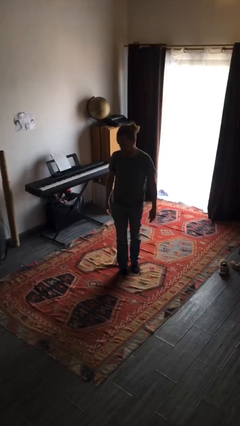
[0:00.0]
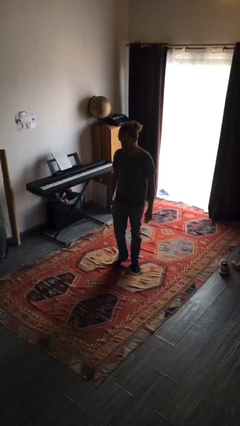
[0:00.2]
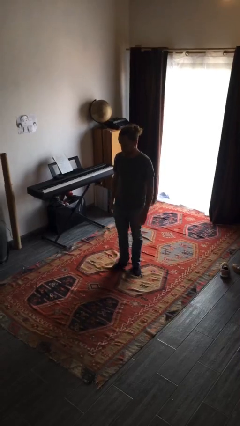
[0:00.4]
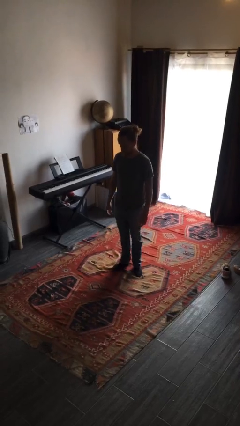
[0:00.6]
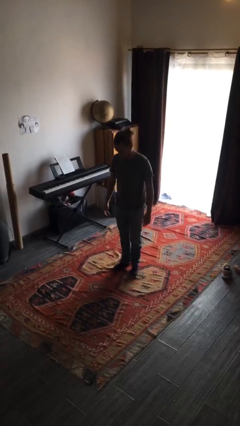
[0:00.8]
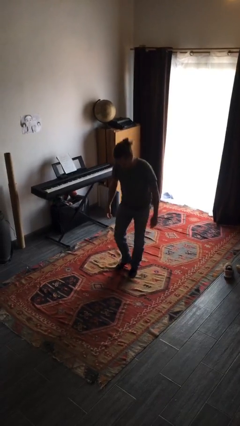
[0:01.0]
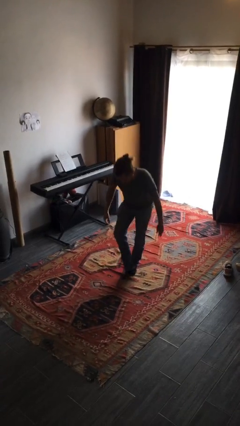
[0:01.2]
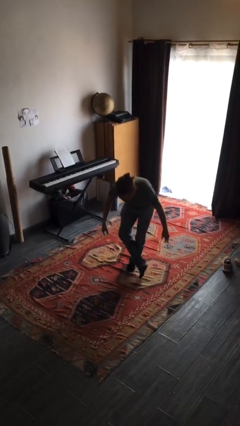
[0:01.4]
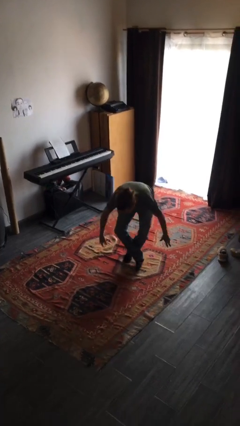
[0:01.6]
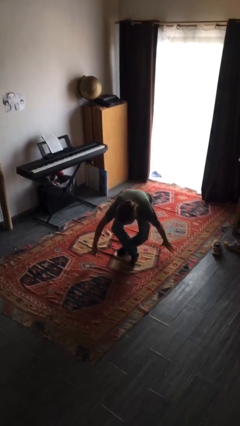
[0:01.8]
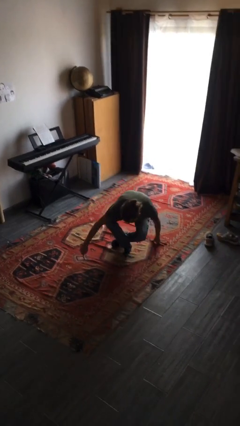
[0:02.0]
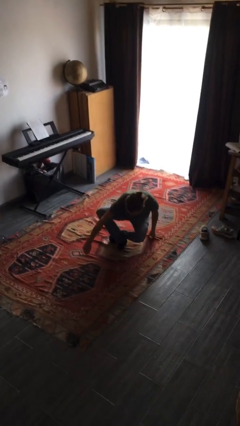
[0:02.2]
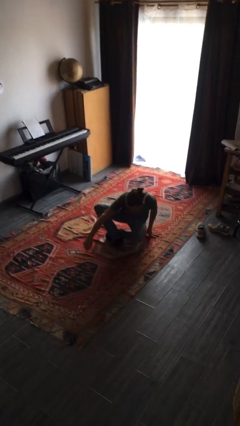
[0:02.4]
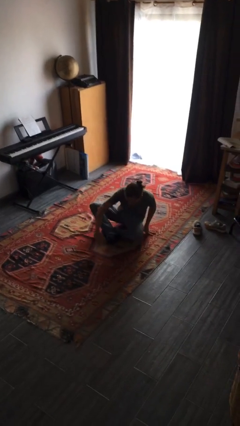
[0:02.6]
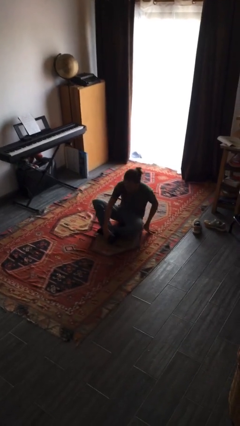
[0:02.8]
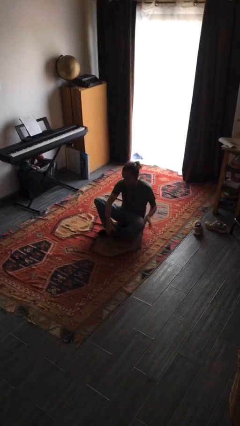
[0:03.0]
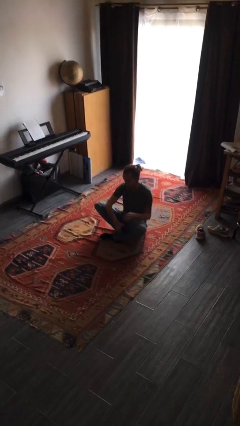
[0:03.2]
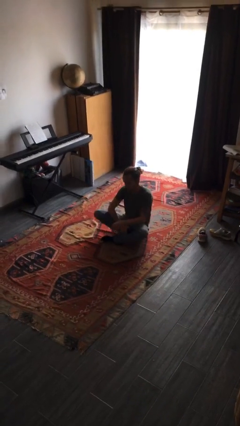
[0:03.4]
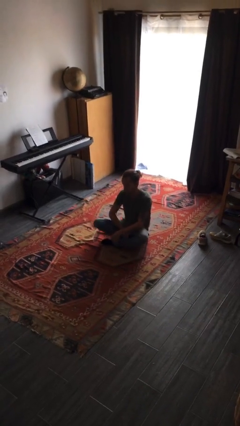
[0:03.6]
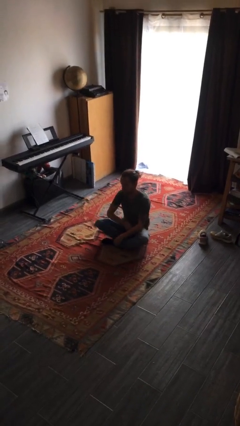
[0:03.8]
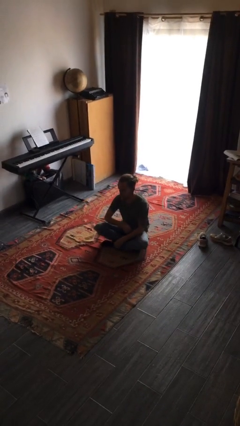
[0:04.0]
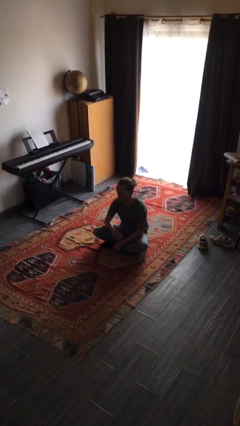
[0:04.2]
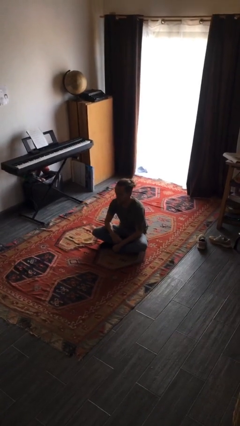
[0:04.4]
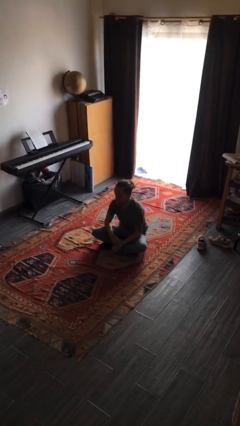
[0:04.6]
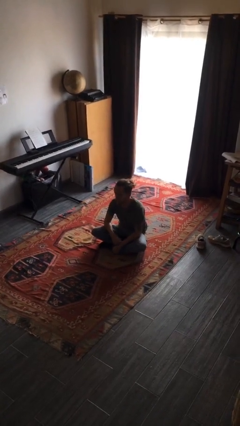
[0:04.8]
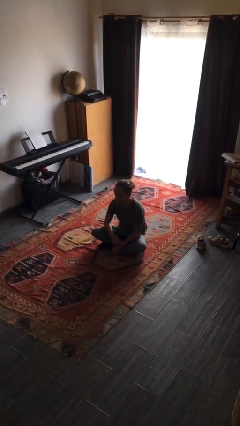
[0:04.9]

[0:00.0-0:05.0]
person sits crisscross

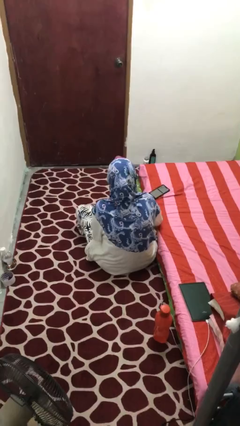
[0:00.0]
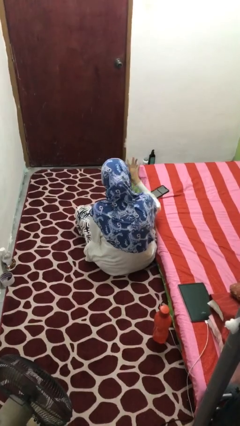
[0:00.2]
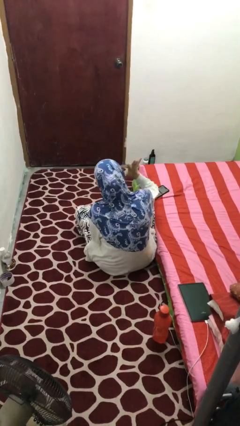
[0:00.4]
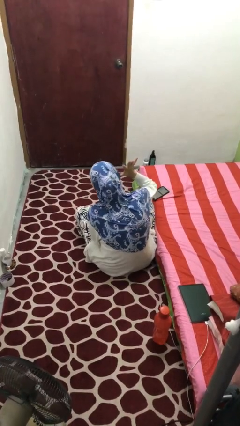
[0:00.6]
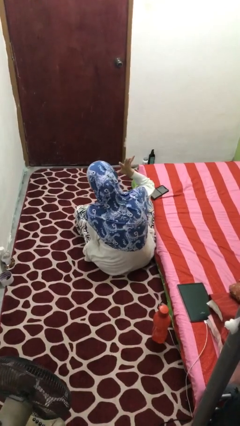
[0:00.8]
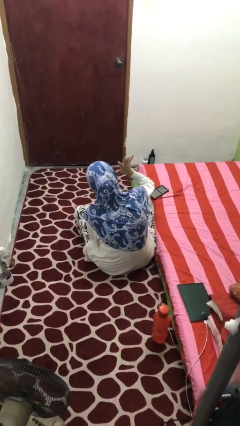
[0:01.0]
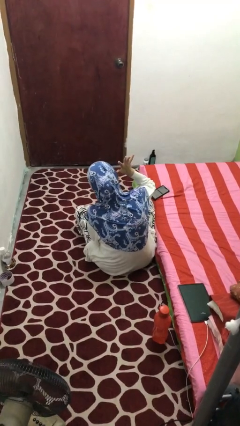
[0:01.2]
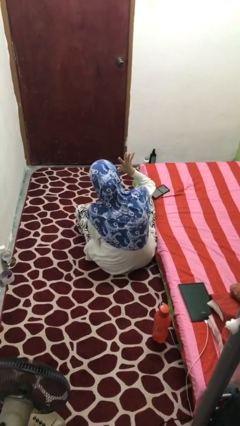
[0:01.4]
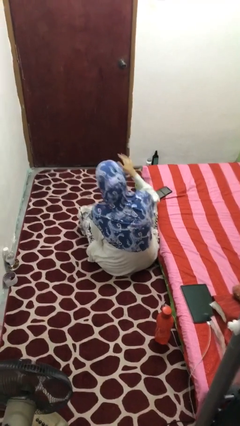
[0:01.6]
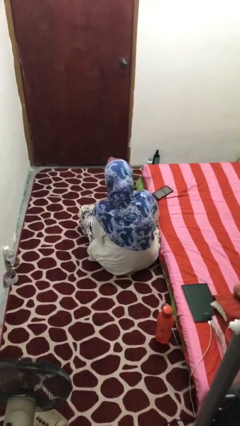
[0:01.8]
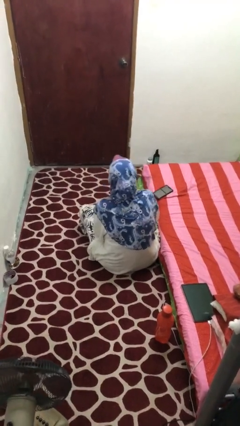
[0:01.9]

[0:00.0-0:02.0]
person gestures number five

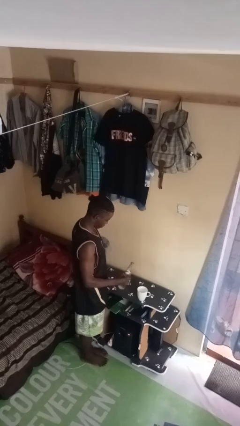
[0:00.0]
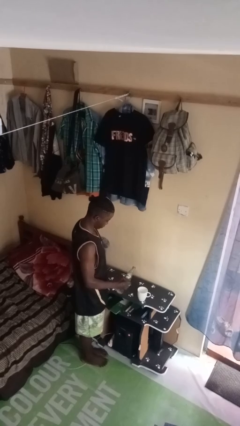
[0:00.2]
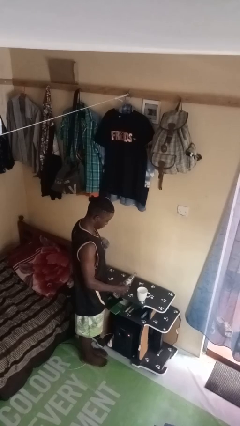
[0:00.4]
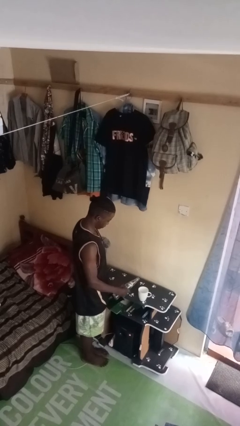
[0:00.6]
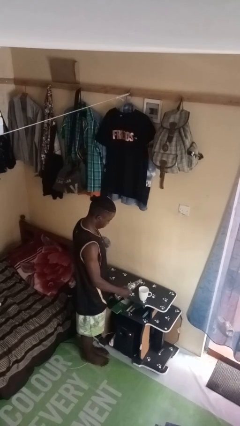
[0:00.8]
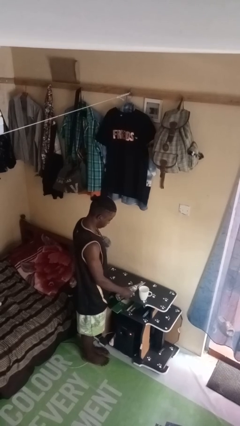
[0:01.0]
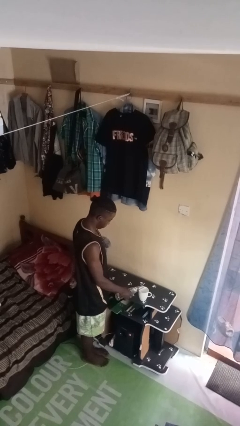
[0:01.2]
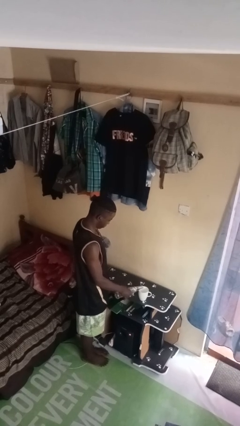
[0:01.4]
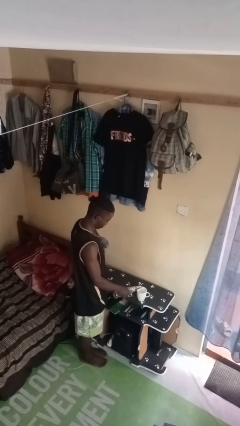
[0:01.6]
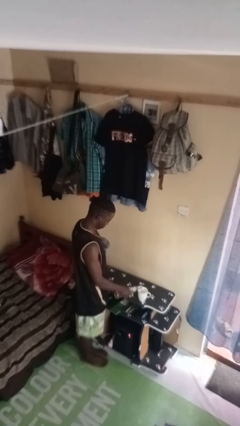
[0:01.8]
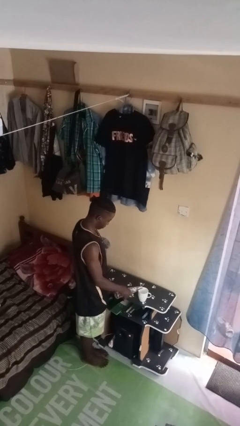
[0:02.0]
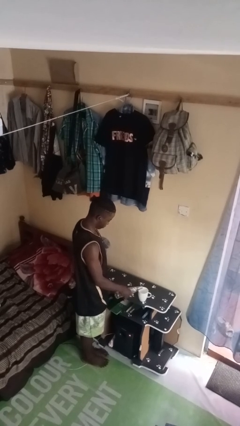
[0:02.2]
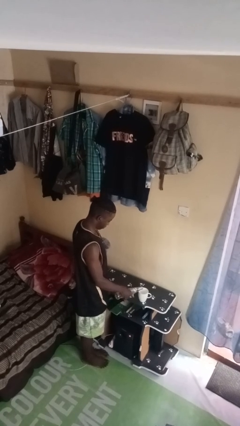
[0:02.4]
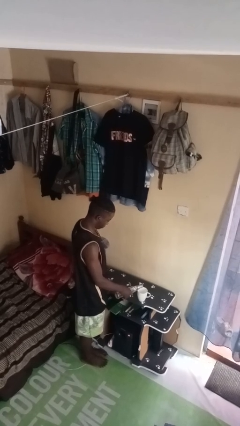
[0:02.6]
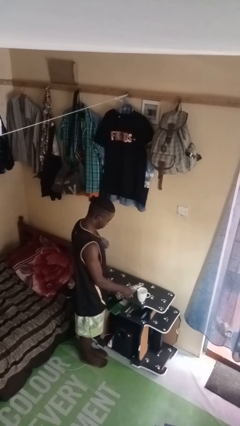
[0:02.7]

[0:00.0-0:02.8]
person pours liquid into cup

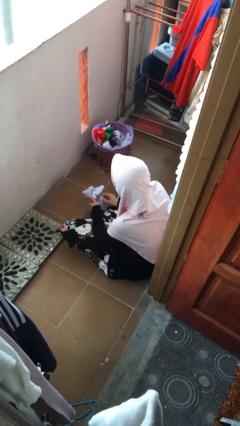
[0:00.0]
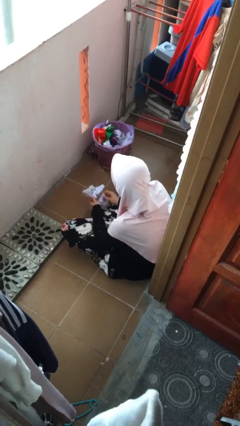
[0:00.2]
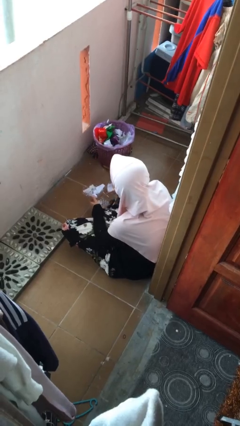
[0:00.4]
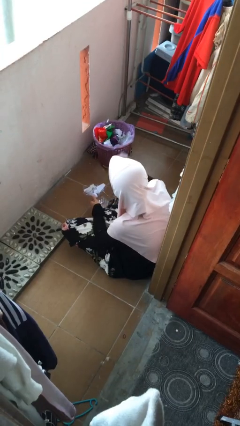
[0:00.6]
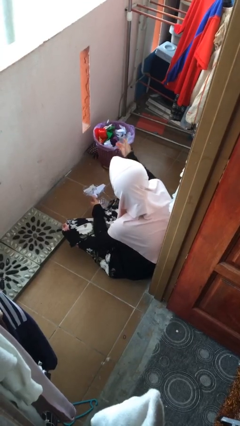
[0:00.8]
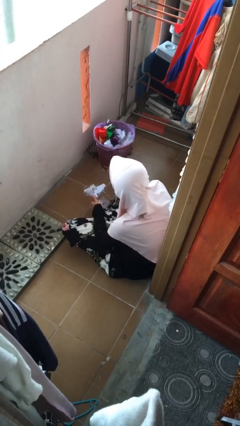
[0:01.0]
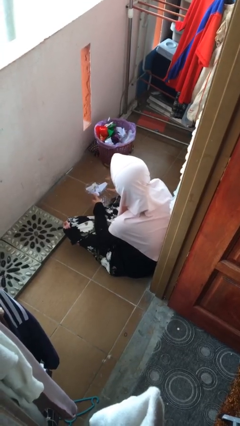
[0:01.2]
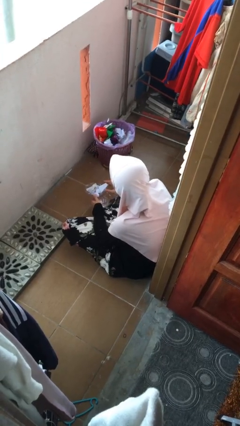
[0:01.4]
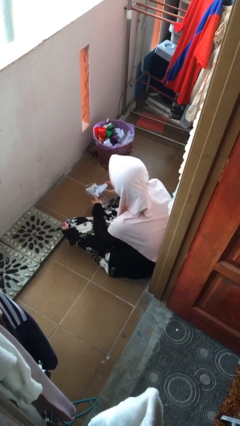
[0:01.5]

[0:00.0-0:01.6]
person discards trash

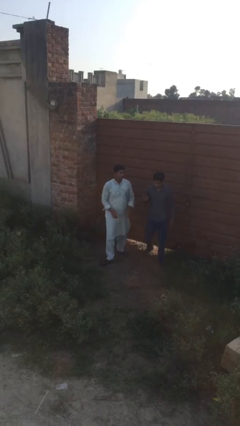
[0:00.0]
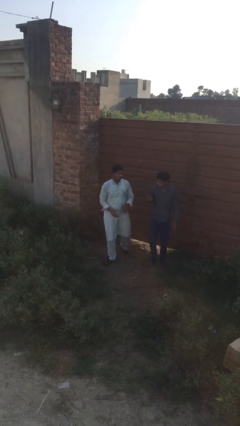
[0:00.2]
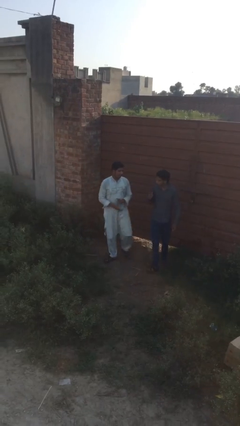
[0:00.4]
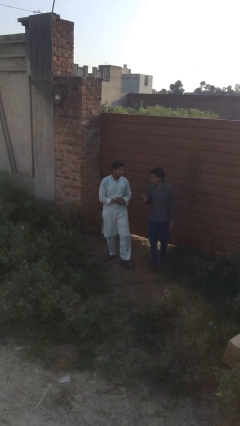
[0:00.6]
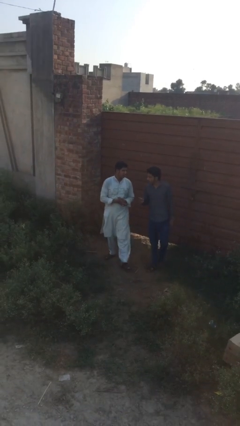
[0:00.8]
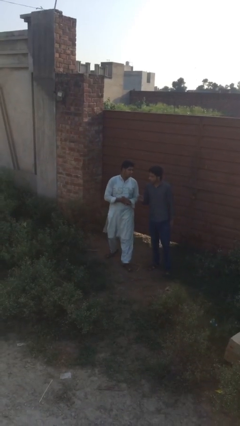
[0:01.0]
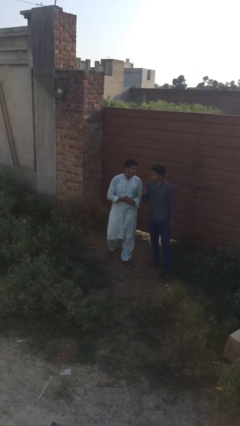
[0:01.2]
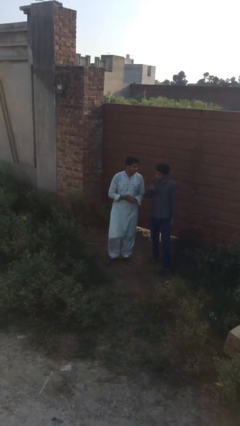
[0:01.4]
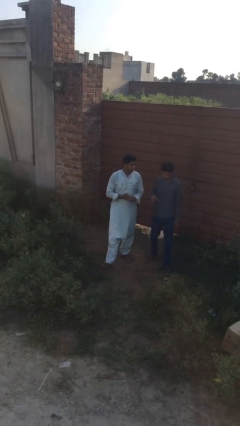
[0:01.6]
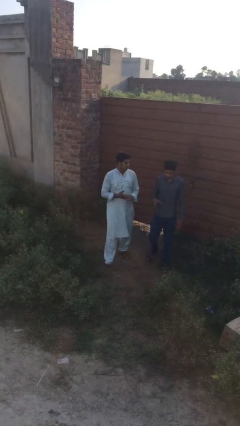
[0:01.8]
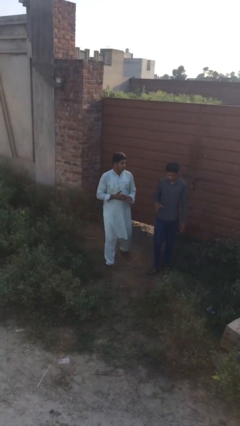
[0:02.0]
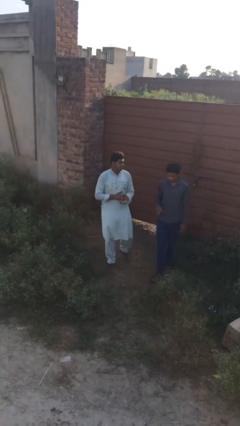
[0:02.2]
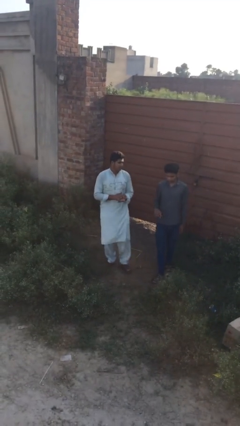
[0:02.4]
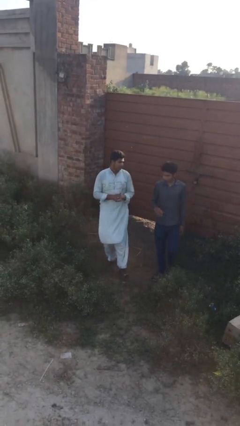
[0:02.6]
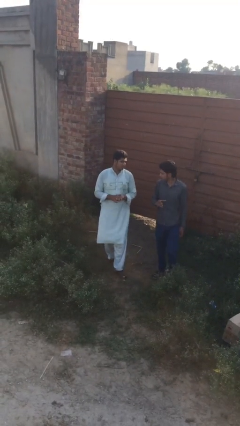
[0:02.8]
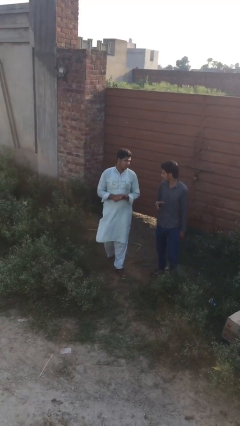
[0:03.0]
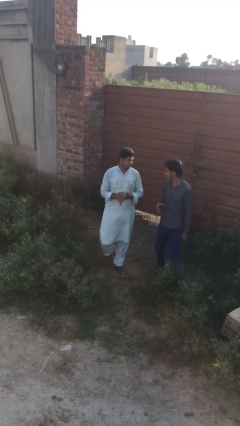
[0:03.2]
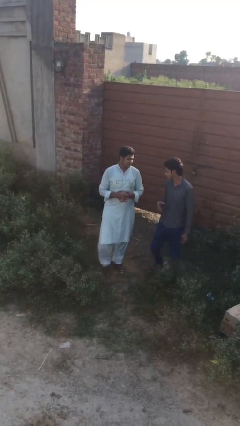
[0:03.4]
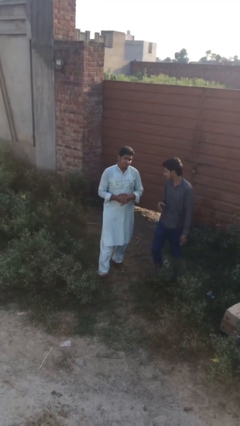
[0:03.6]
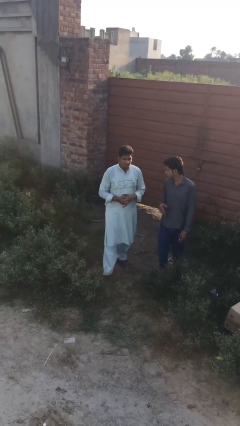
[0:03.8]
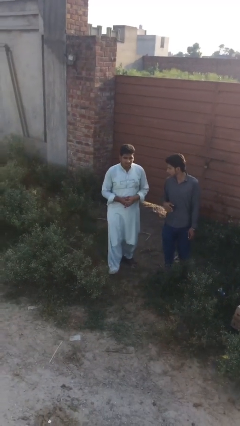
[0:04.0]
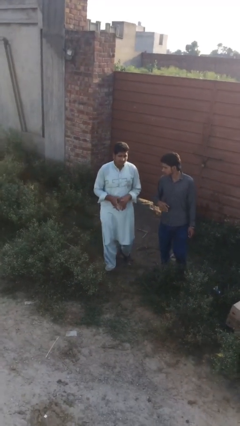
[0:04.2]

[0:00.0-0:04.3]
person talks to person

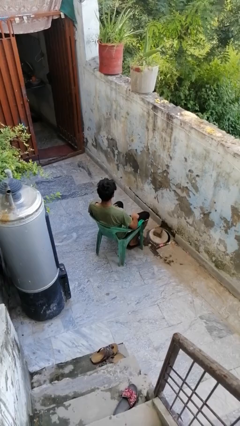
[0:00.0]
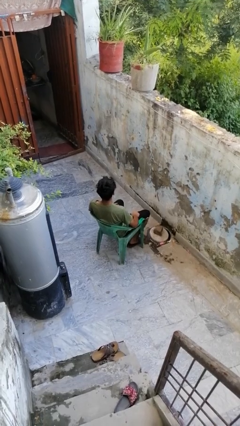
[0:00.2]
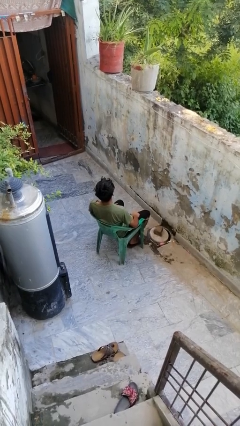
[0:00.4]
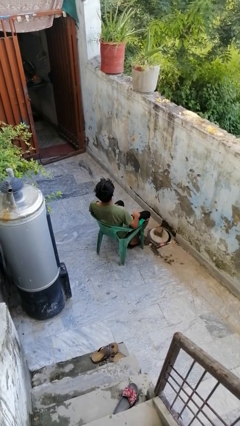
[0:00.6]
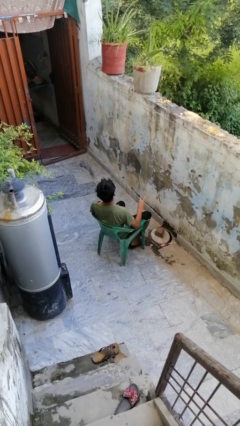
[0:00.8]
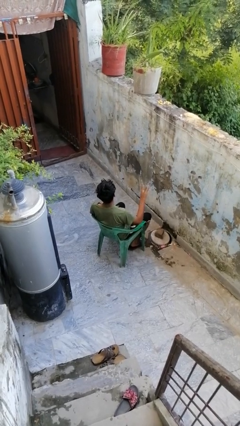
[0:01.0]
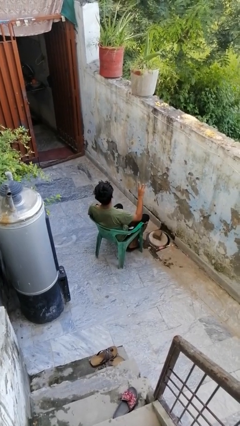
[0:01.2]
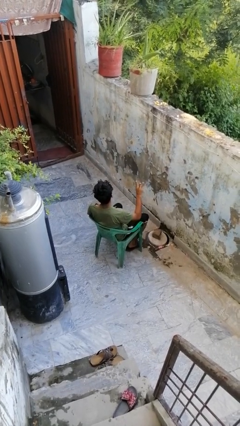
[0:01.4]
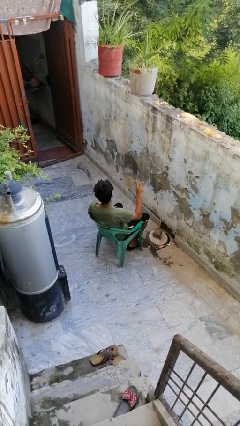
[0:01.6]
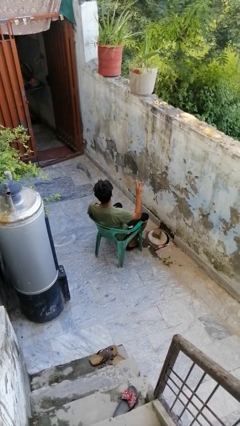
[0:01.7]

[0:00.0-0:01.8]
person gestures number three
